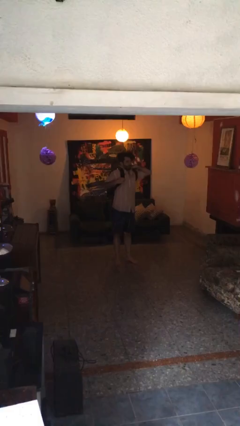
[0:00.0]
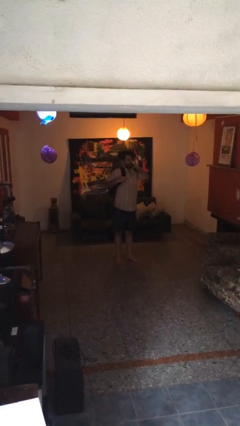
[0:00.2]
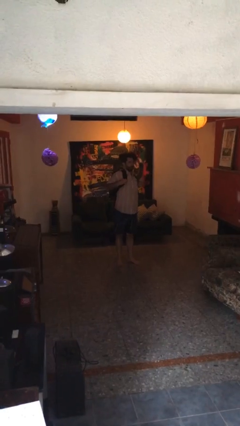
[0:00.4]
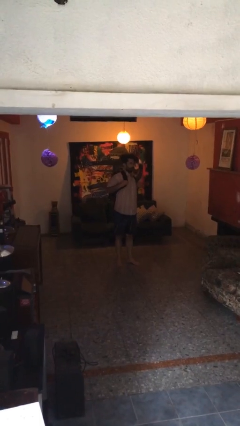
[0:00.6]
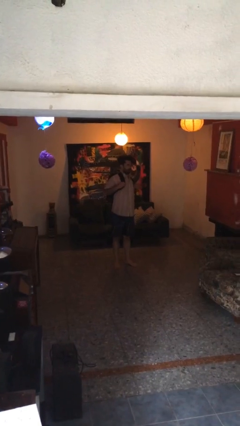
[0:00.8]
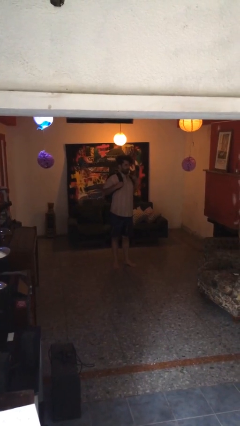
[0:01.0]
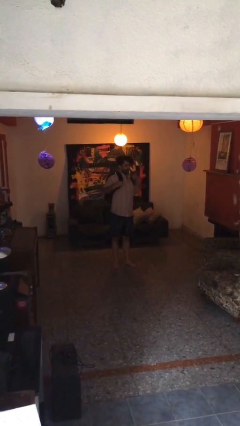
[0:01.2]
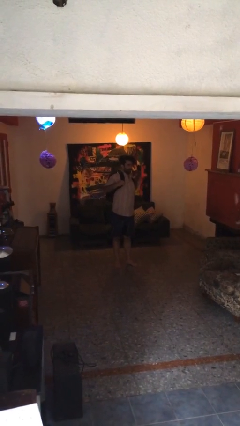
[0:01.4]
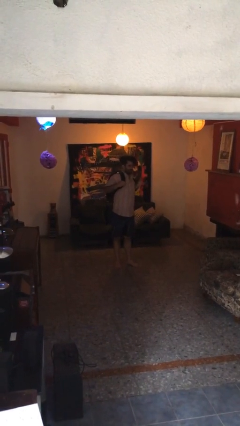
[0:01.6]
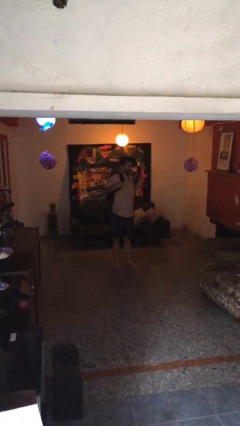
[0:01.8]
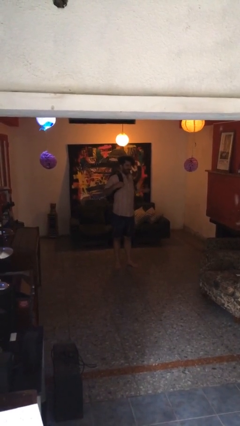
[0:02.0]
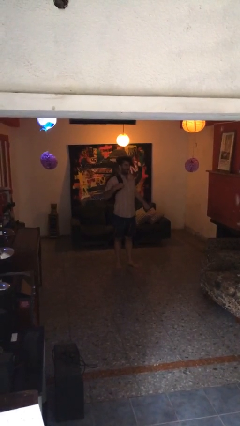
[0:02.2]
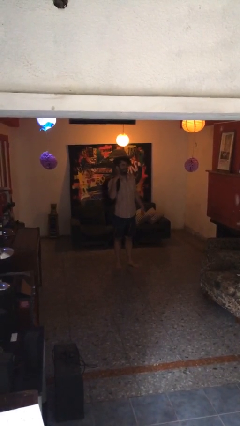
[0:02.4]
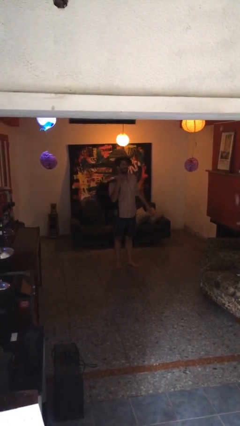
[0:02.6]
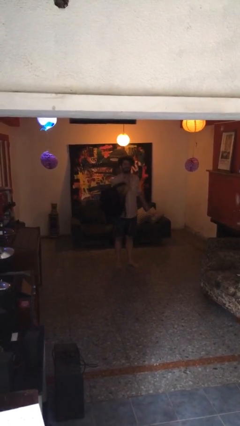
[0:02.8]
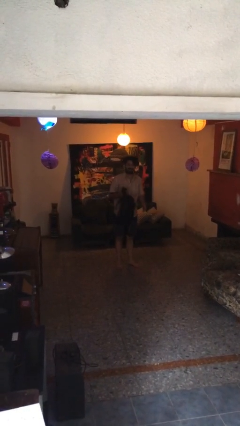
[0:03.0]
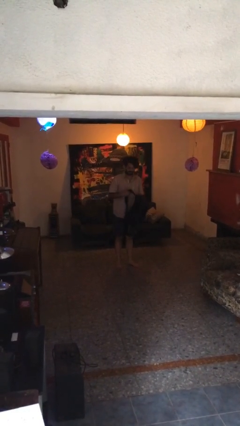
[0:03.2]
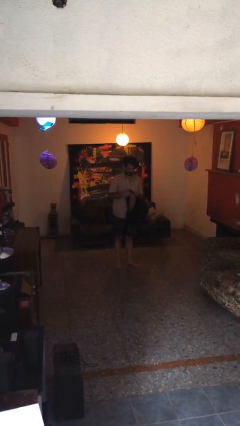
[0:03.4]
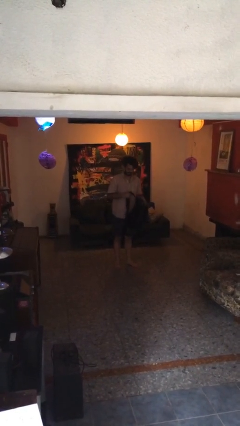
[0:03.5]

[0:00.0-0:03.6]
person takes off backpack

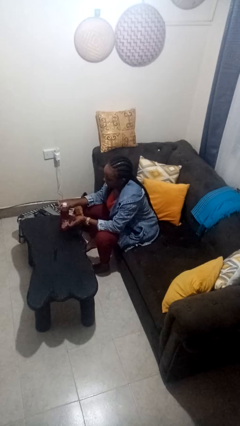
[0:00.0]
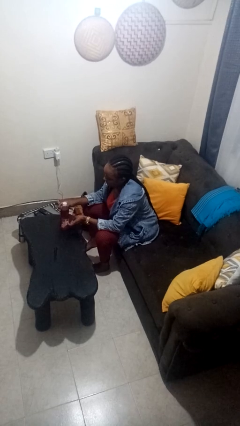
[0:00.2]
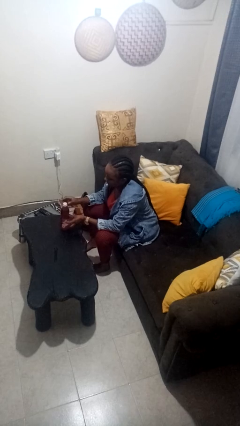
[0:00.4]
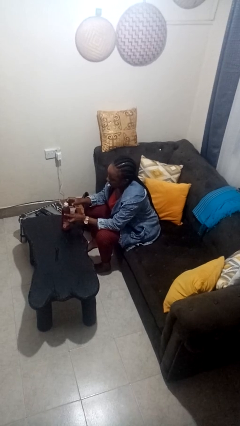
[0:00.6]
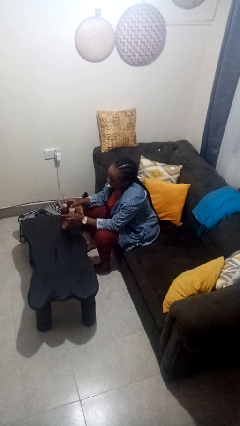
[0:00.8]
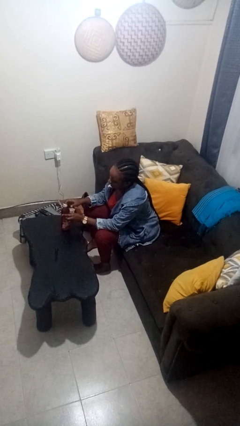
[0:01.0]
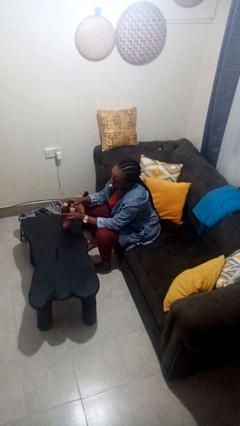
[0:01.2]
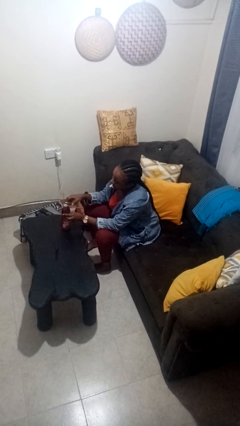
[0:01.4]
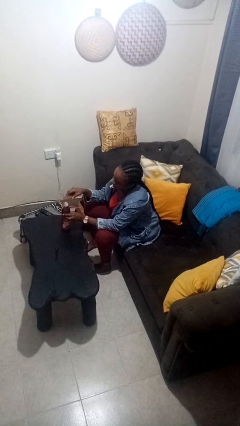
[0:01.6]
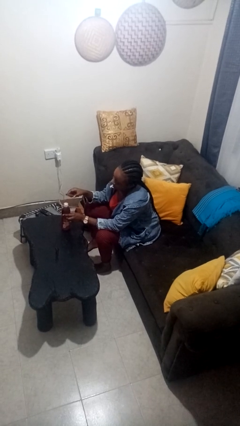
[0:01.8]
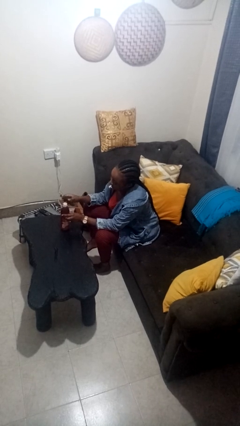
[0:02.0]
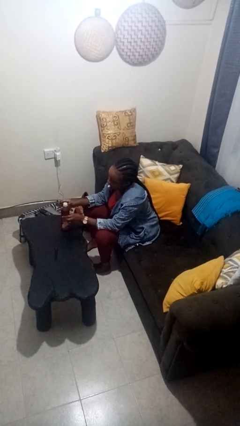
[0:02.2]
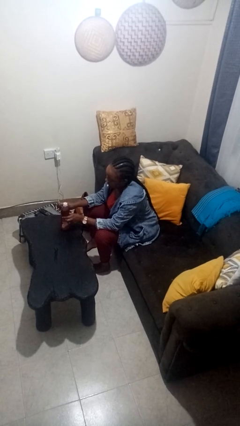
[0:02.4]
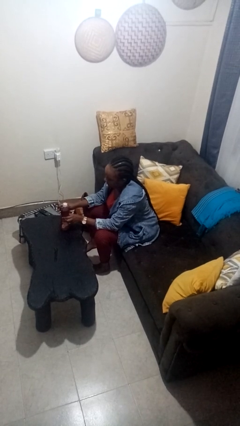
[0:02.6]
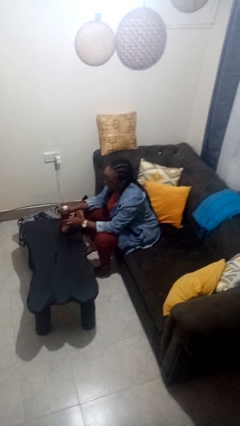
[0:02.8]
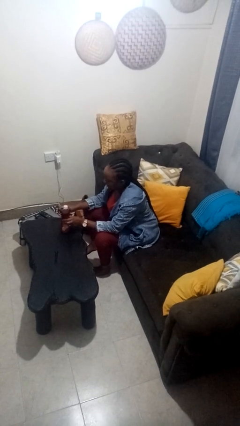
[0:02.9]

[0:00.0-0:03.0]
person opens can with can opener

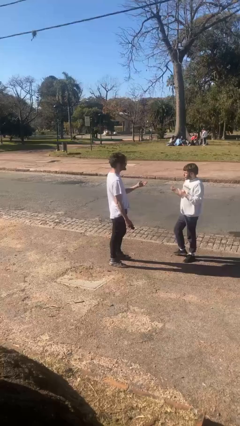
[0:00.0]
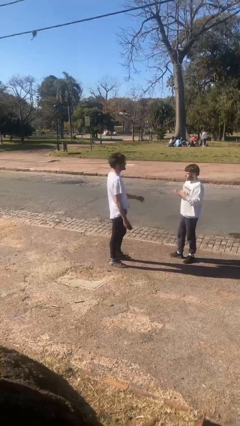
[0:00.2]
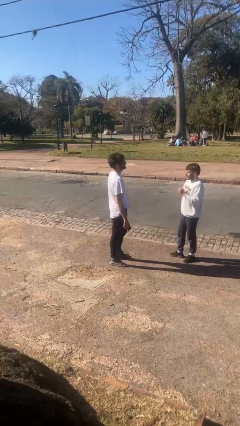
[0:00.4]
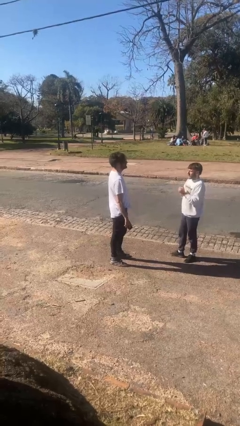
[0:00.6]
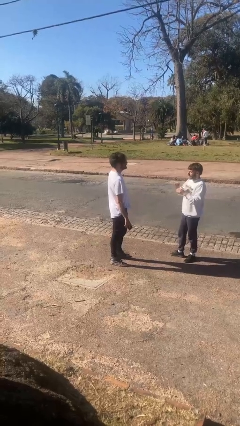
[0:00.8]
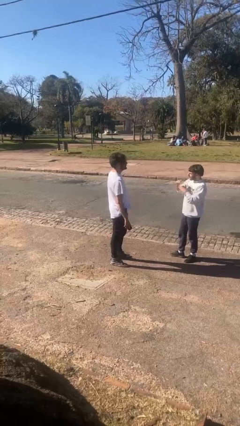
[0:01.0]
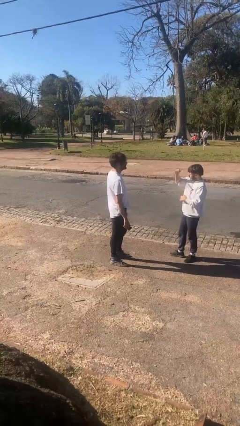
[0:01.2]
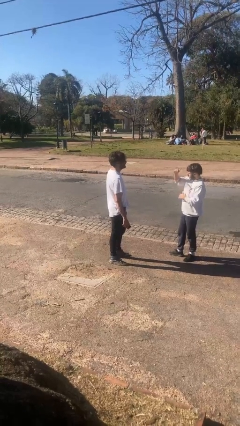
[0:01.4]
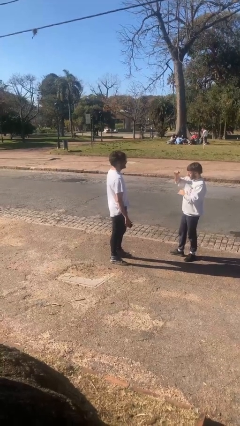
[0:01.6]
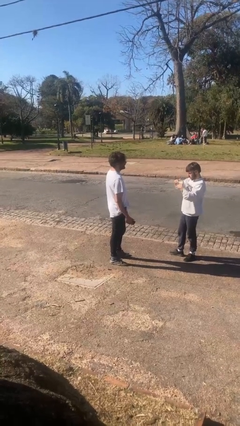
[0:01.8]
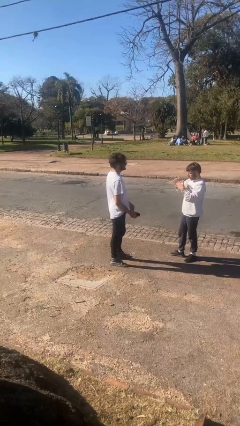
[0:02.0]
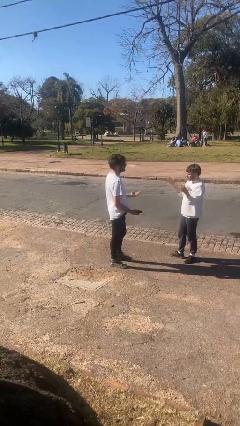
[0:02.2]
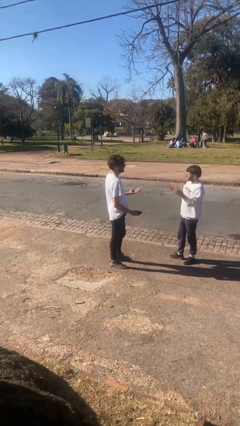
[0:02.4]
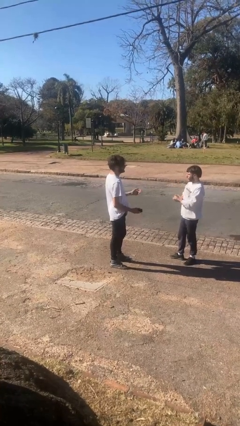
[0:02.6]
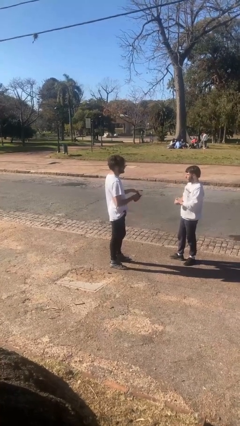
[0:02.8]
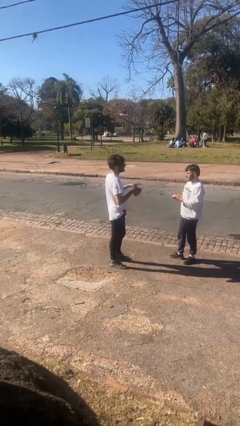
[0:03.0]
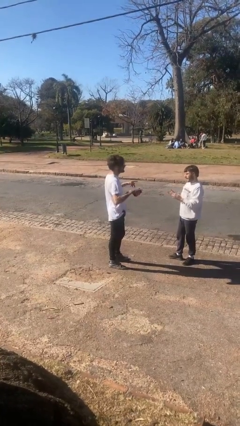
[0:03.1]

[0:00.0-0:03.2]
person talks to person

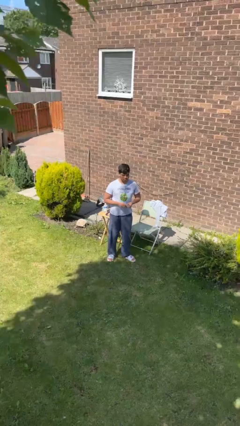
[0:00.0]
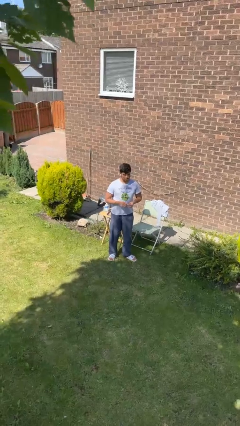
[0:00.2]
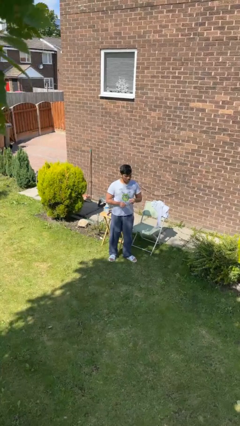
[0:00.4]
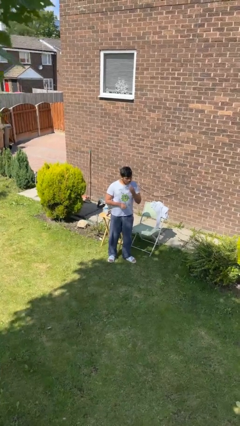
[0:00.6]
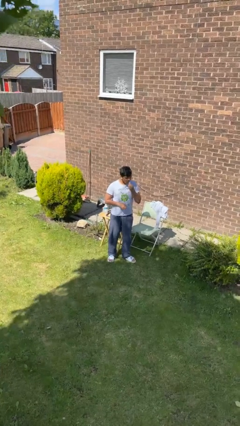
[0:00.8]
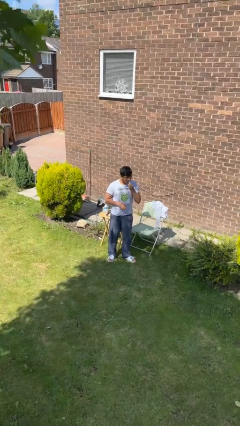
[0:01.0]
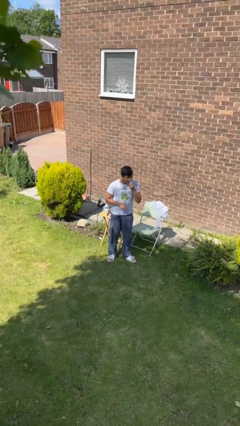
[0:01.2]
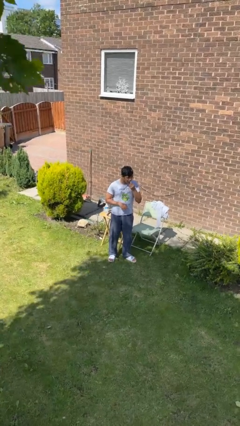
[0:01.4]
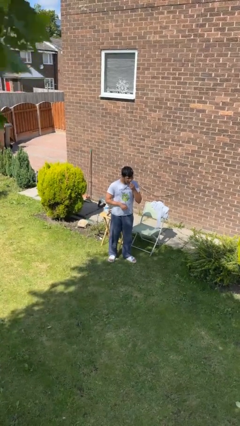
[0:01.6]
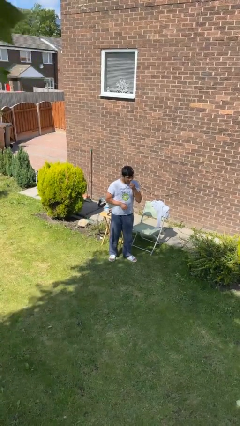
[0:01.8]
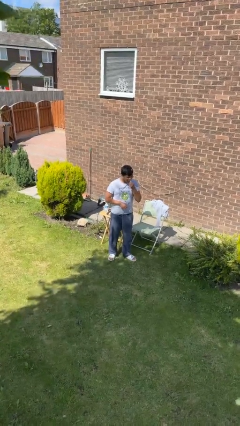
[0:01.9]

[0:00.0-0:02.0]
person flosses

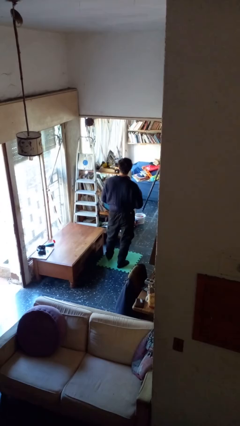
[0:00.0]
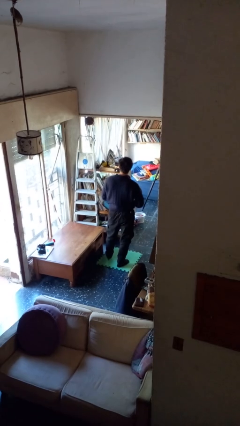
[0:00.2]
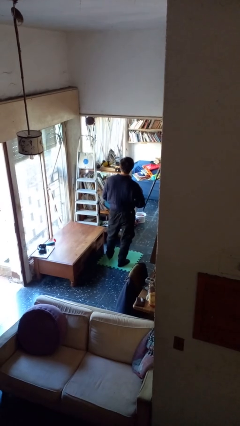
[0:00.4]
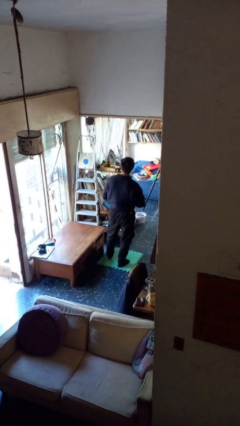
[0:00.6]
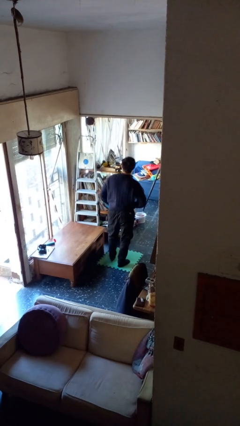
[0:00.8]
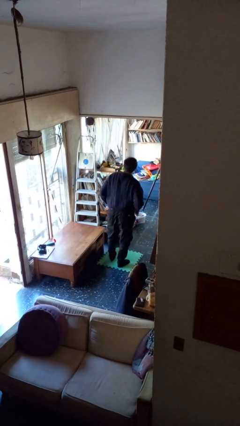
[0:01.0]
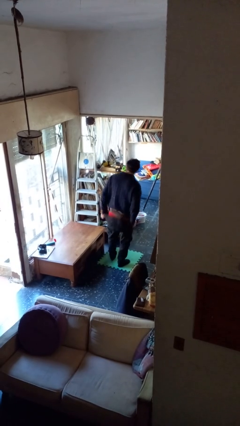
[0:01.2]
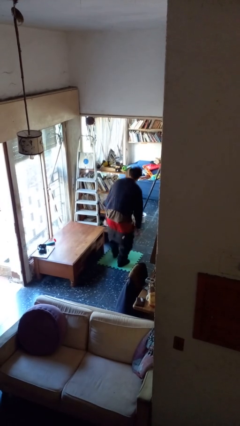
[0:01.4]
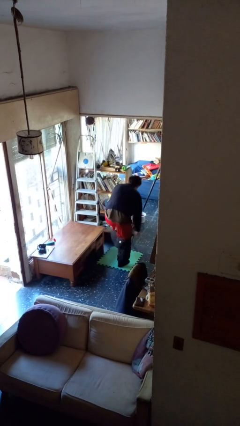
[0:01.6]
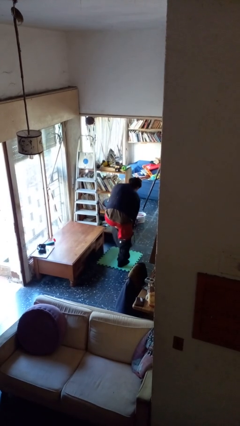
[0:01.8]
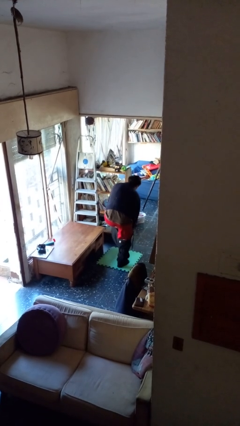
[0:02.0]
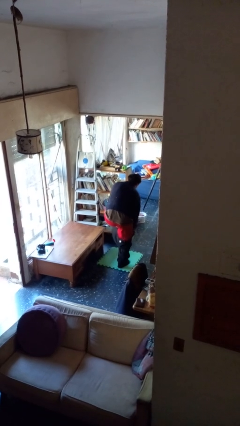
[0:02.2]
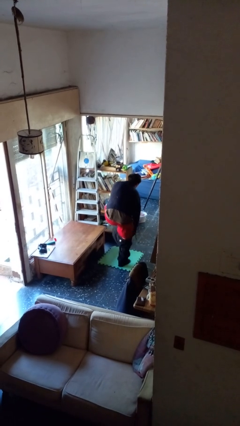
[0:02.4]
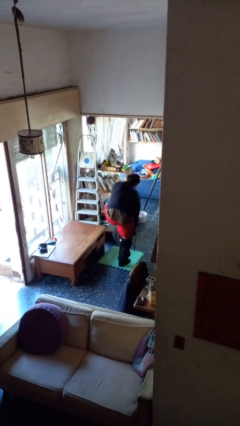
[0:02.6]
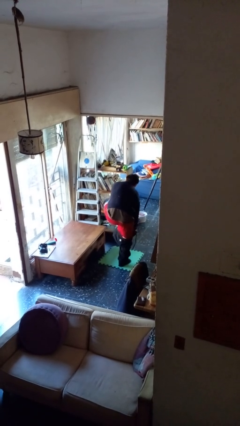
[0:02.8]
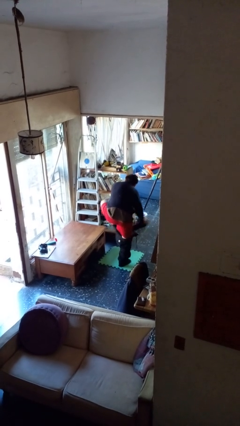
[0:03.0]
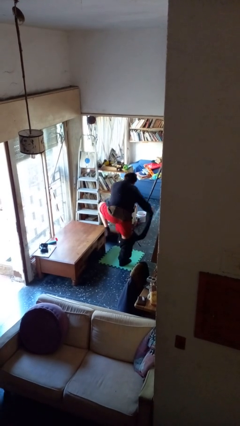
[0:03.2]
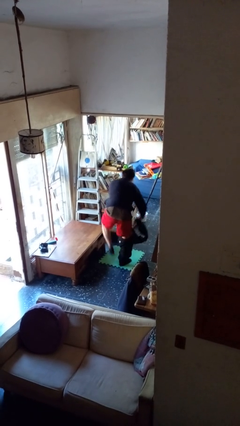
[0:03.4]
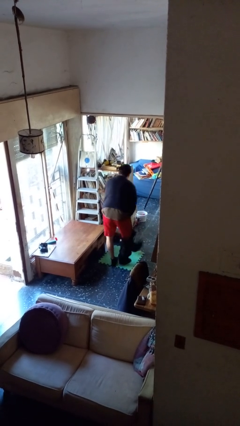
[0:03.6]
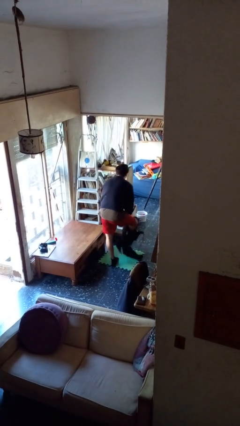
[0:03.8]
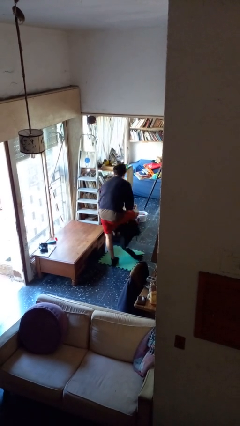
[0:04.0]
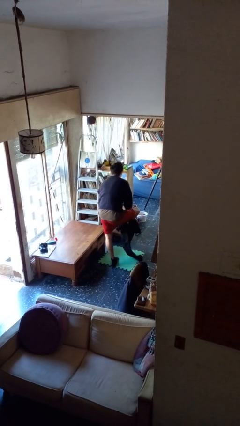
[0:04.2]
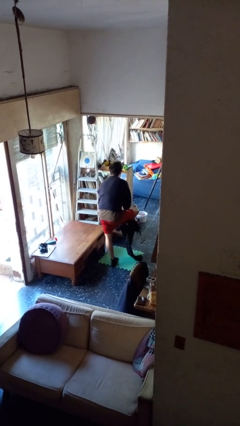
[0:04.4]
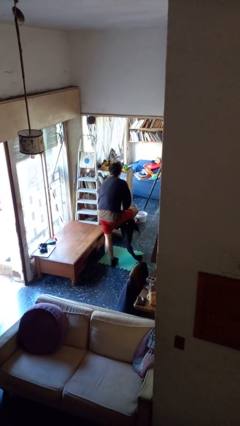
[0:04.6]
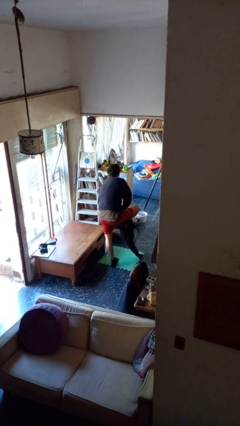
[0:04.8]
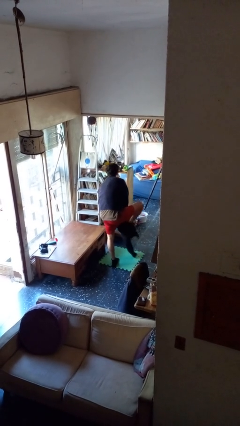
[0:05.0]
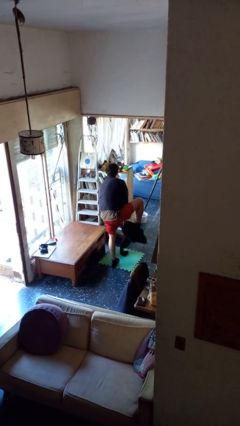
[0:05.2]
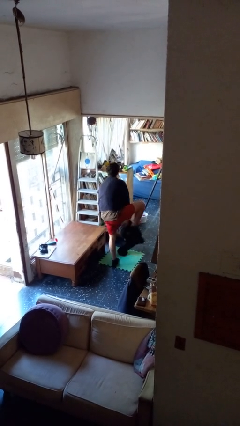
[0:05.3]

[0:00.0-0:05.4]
person takes off pants

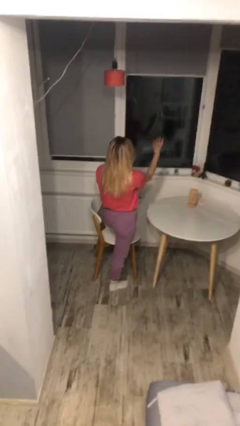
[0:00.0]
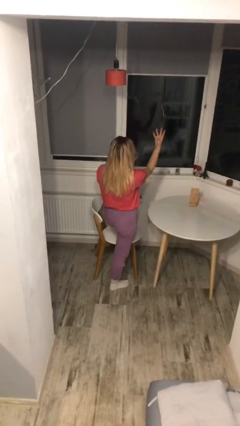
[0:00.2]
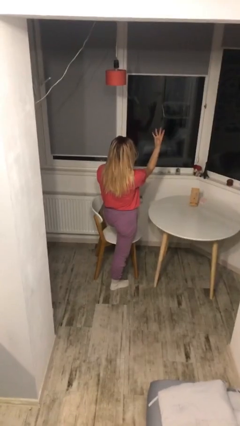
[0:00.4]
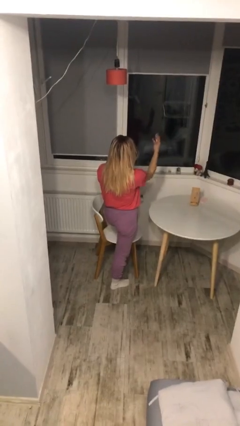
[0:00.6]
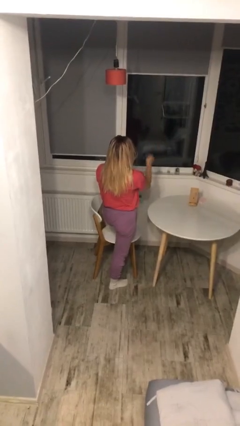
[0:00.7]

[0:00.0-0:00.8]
person gestures number four
